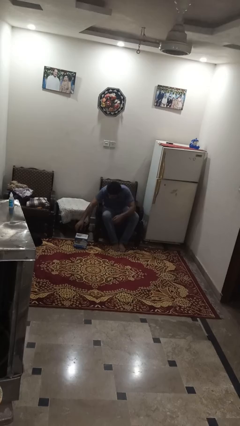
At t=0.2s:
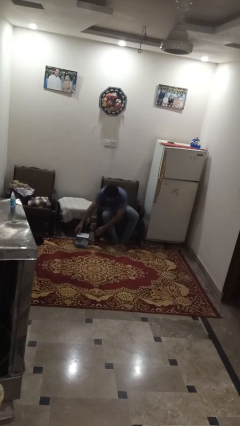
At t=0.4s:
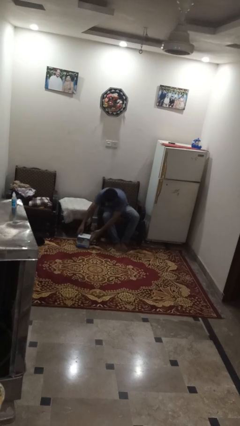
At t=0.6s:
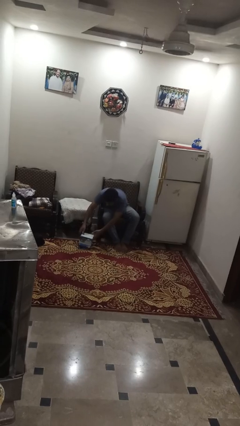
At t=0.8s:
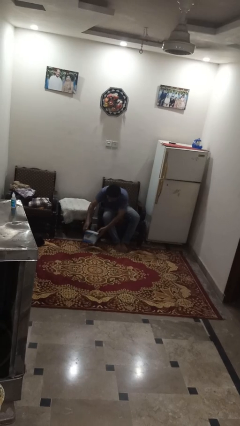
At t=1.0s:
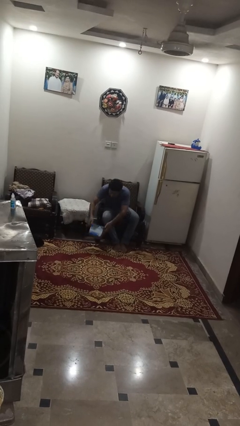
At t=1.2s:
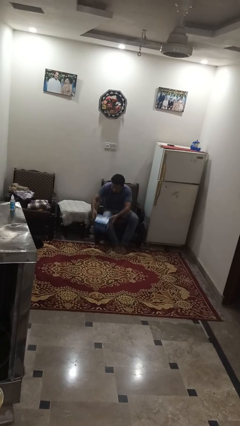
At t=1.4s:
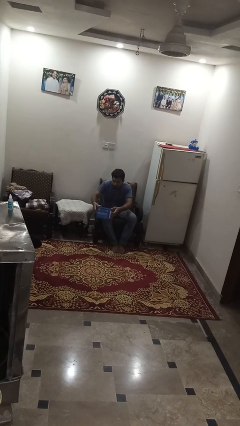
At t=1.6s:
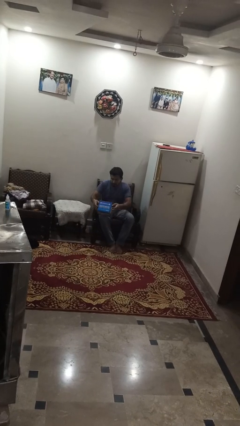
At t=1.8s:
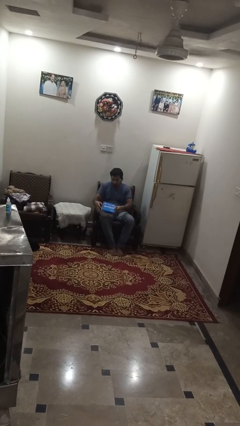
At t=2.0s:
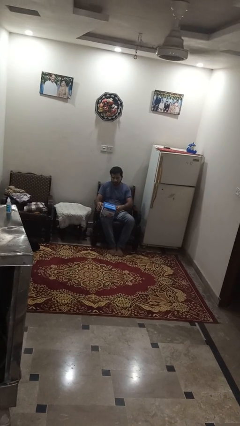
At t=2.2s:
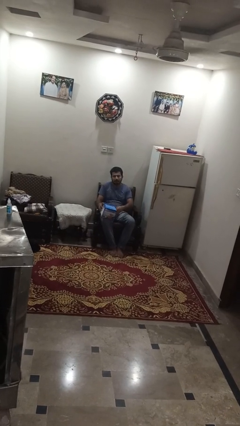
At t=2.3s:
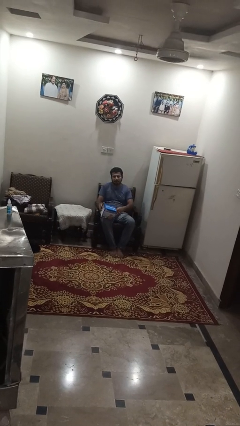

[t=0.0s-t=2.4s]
person picks up object from floor

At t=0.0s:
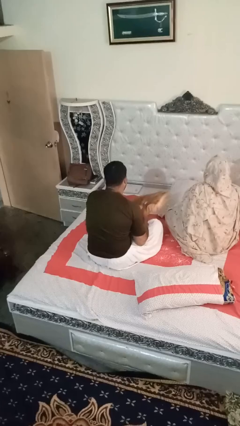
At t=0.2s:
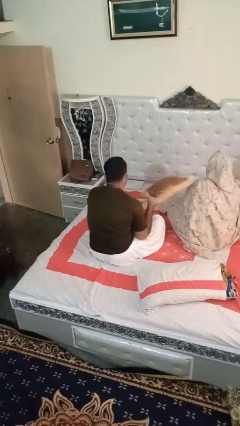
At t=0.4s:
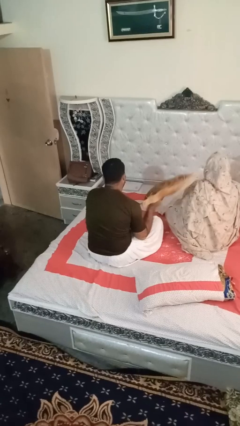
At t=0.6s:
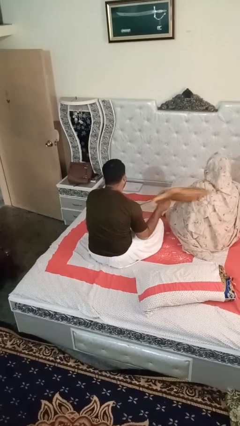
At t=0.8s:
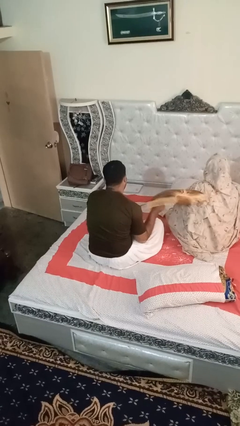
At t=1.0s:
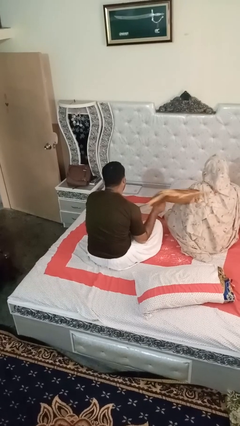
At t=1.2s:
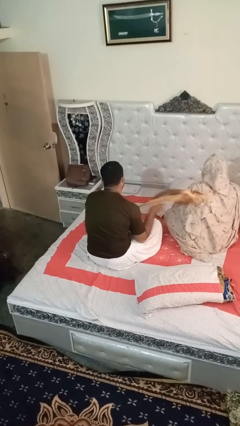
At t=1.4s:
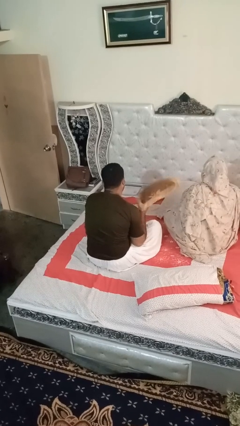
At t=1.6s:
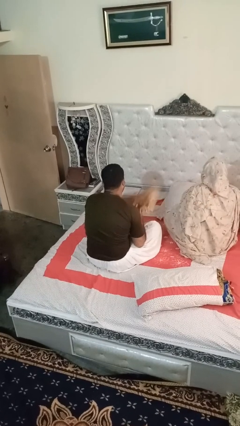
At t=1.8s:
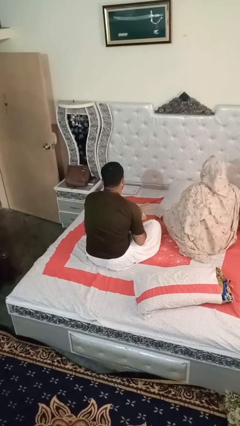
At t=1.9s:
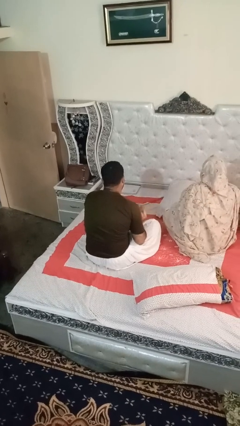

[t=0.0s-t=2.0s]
person hits person with pillow

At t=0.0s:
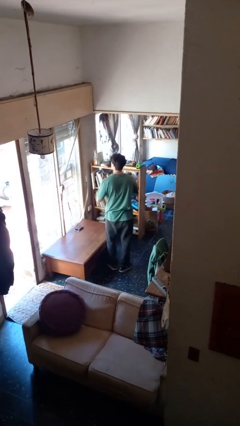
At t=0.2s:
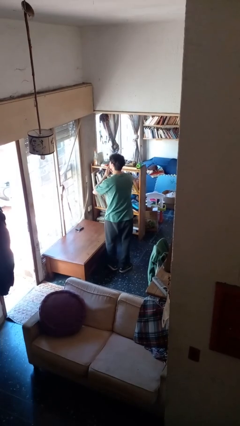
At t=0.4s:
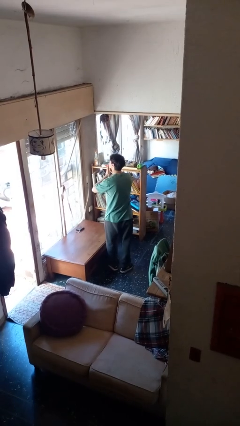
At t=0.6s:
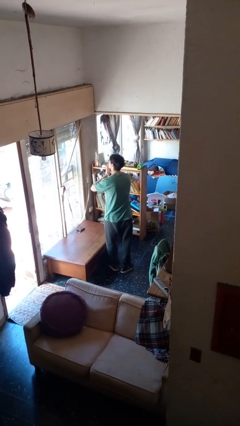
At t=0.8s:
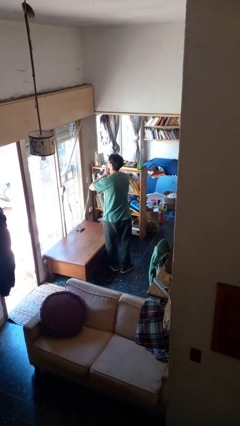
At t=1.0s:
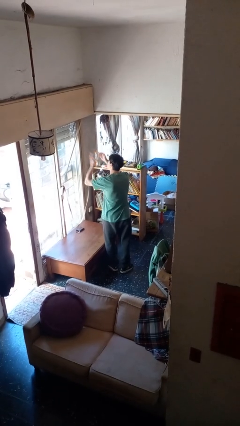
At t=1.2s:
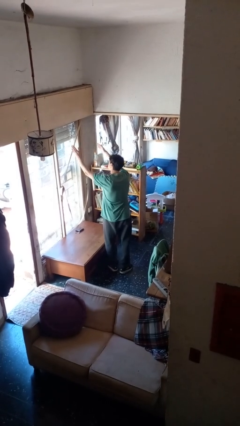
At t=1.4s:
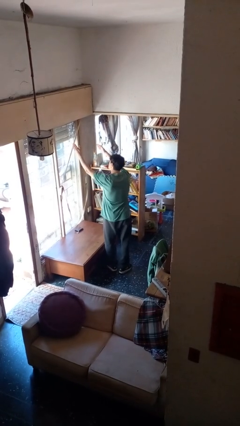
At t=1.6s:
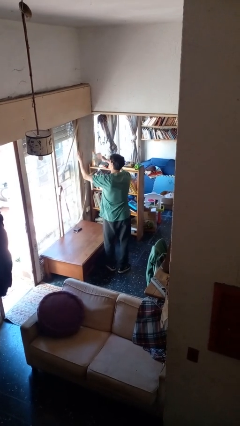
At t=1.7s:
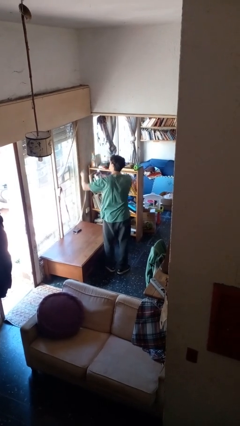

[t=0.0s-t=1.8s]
person gestures blow kiss

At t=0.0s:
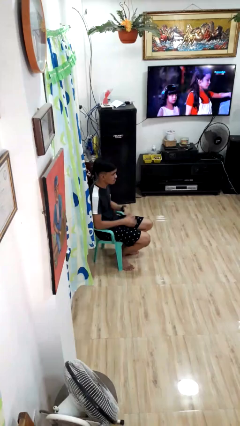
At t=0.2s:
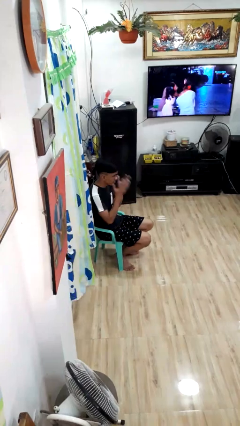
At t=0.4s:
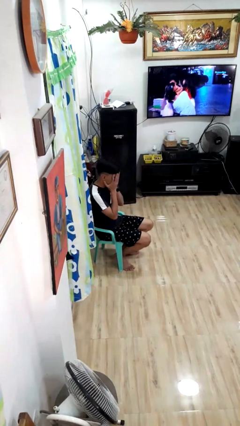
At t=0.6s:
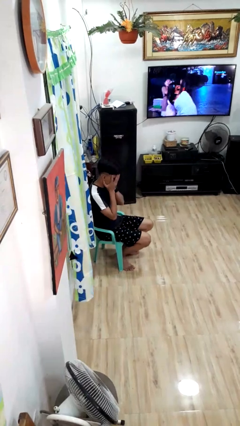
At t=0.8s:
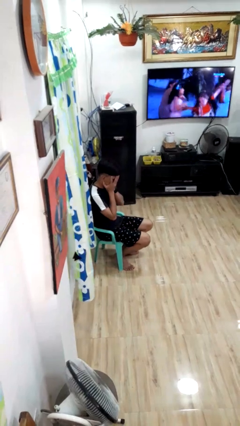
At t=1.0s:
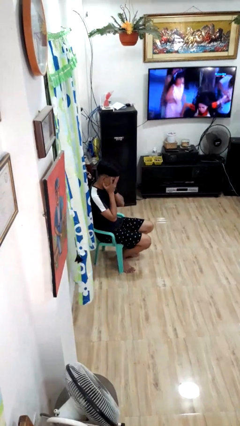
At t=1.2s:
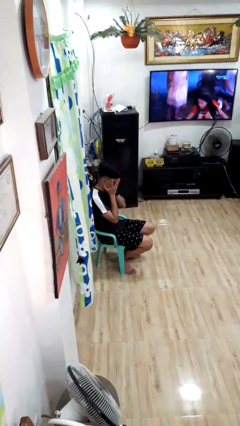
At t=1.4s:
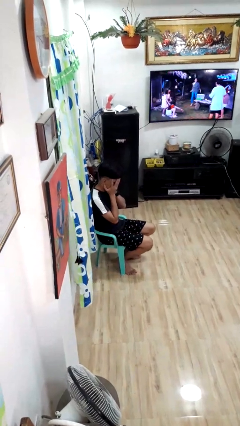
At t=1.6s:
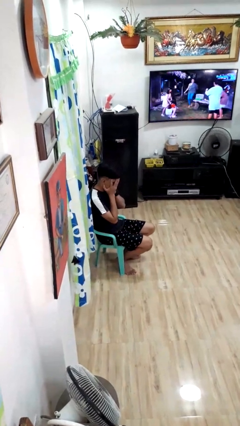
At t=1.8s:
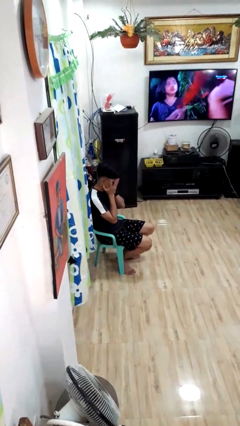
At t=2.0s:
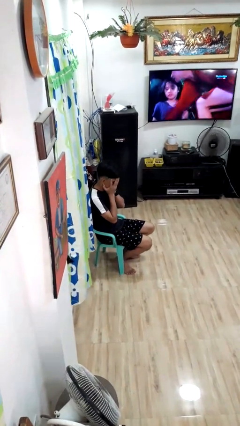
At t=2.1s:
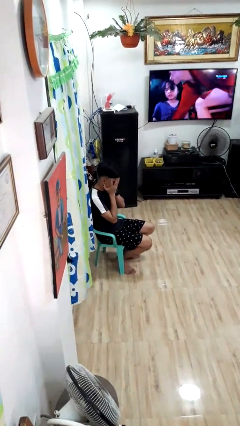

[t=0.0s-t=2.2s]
person covers face with hands

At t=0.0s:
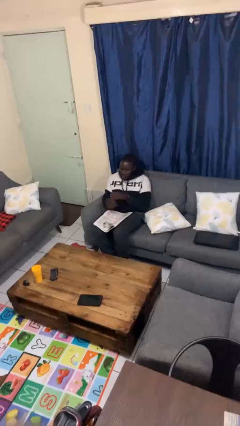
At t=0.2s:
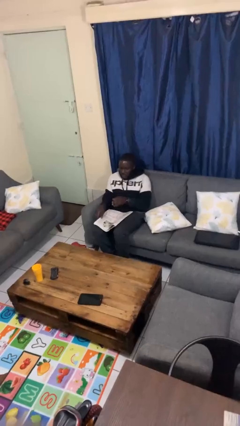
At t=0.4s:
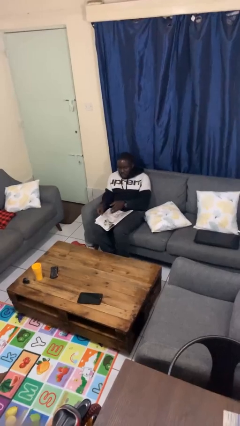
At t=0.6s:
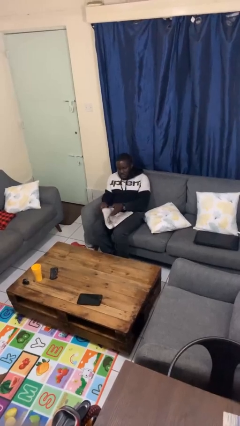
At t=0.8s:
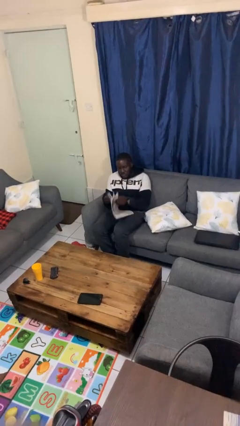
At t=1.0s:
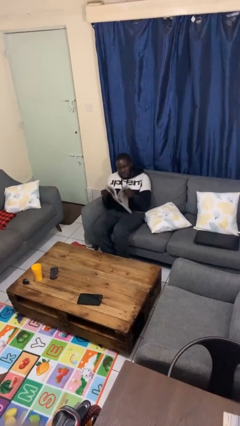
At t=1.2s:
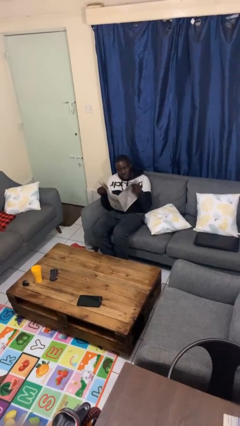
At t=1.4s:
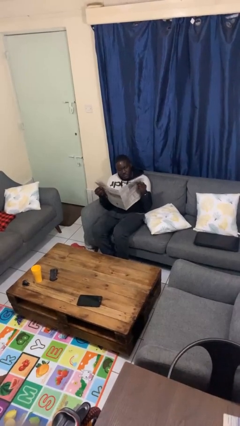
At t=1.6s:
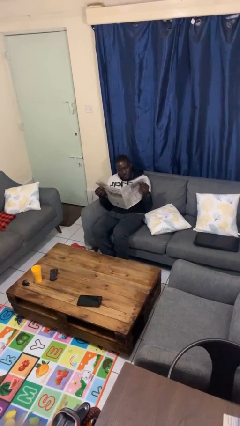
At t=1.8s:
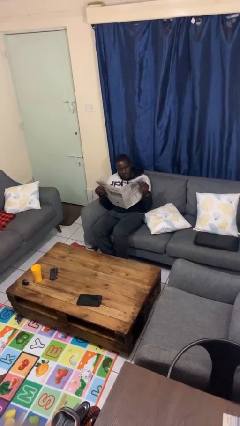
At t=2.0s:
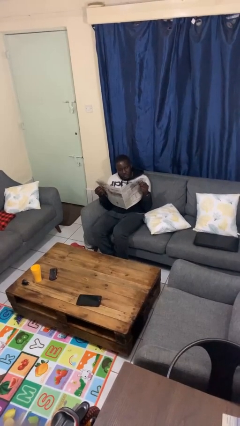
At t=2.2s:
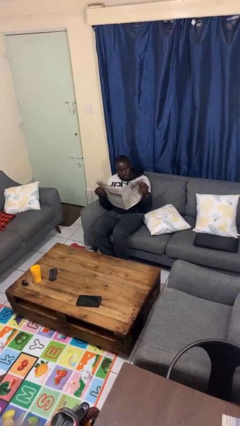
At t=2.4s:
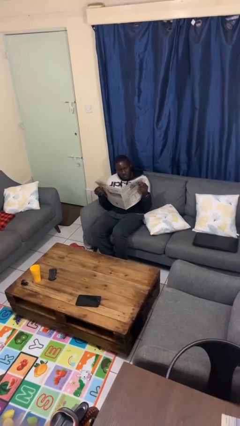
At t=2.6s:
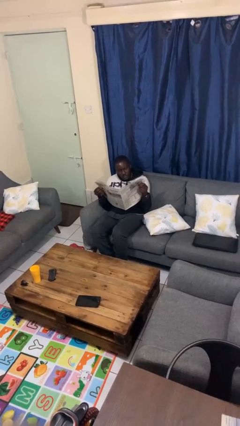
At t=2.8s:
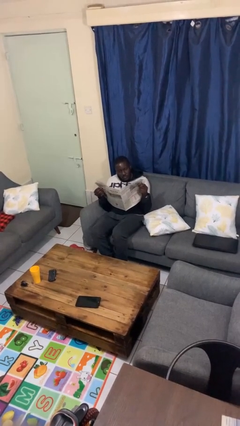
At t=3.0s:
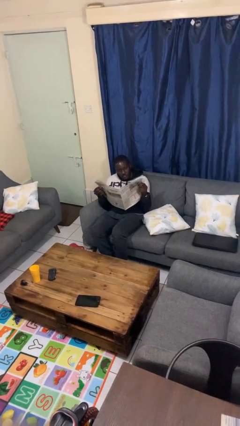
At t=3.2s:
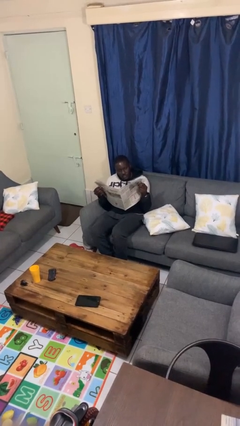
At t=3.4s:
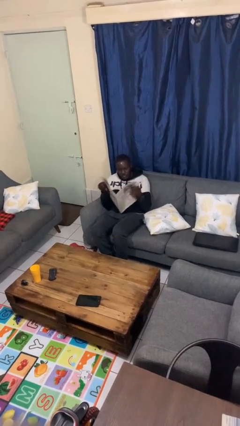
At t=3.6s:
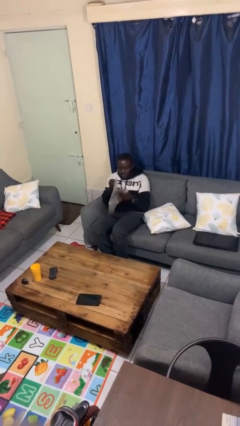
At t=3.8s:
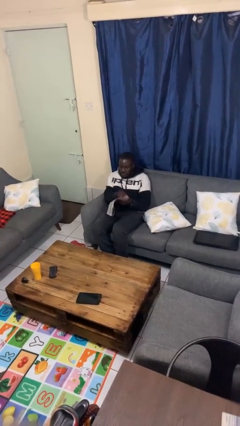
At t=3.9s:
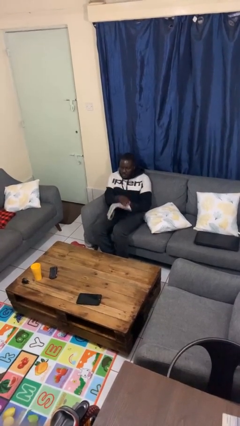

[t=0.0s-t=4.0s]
person reads newspaper

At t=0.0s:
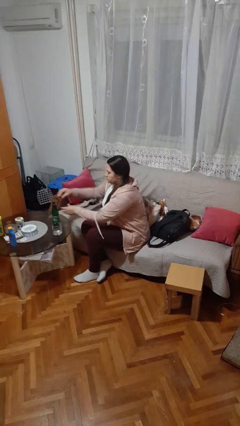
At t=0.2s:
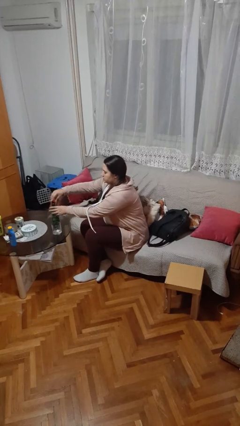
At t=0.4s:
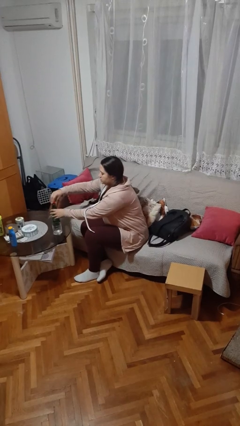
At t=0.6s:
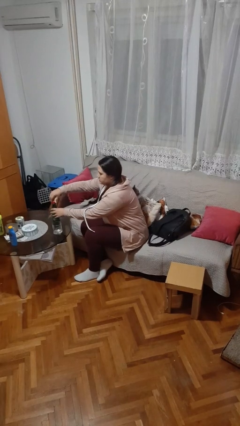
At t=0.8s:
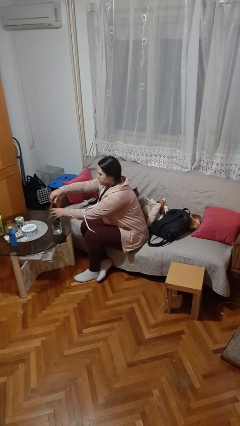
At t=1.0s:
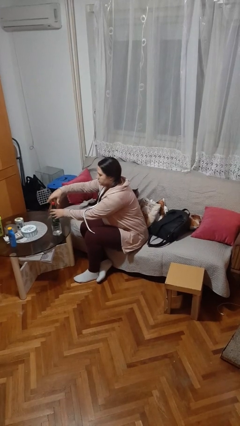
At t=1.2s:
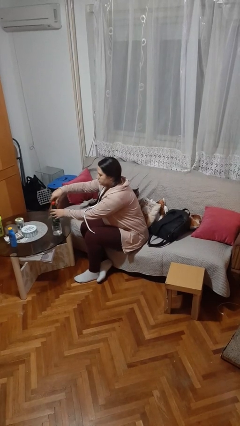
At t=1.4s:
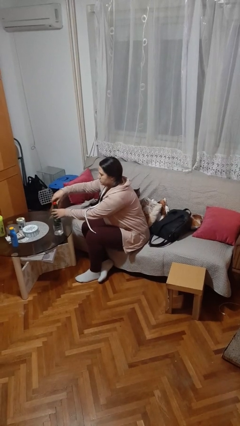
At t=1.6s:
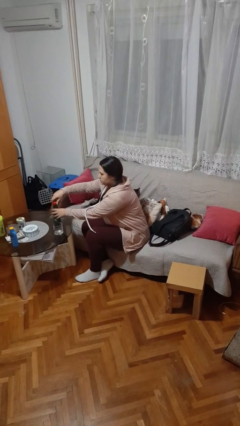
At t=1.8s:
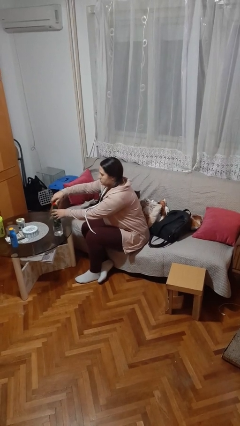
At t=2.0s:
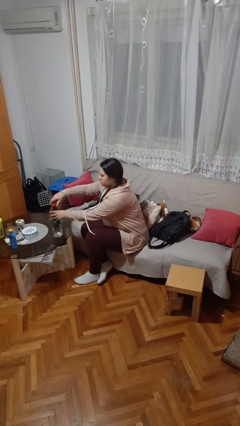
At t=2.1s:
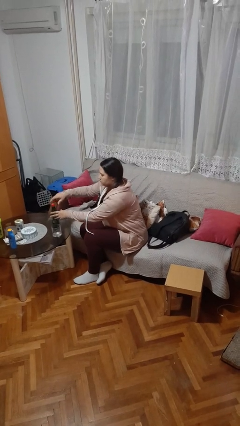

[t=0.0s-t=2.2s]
person screws lid to bottle

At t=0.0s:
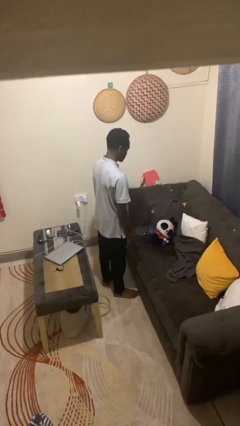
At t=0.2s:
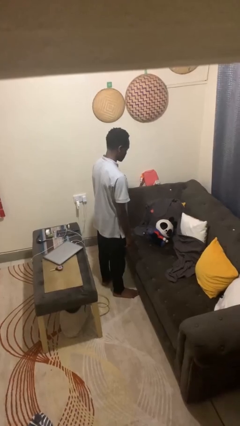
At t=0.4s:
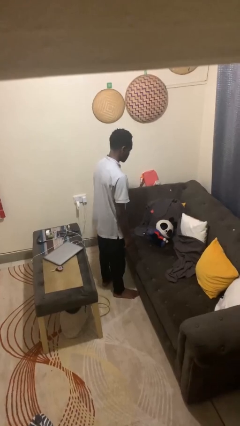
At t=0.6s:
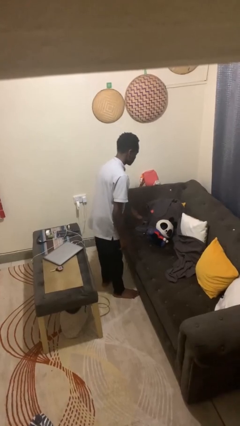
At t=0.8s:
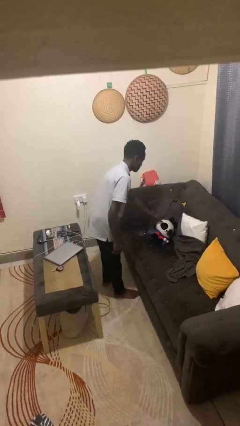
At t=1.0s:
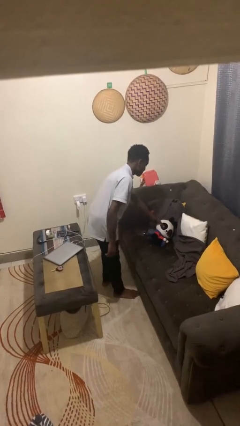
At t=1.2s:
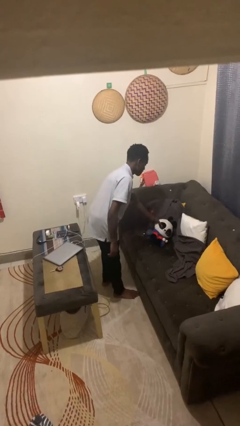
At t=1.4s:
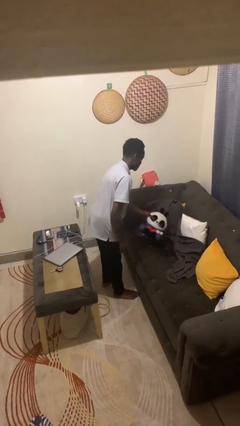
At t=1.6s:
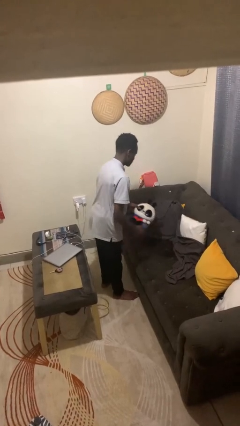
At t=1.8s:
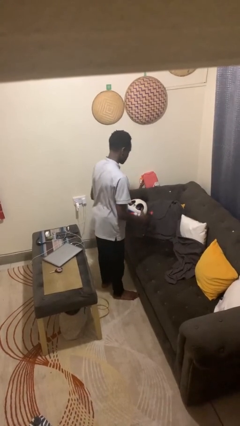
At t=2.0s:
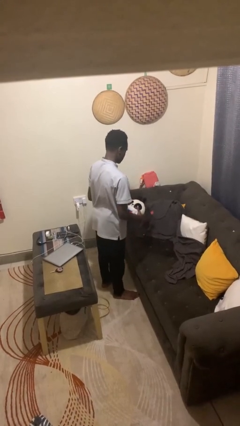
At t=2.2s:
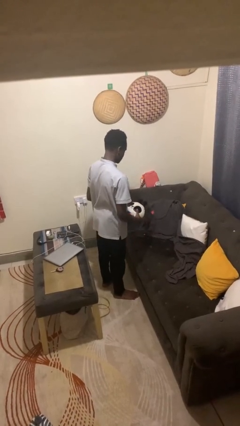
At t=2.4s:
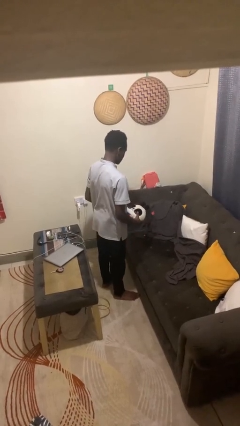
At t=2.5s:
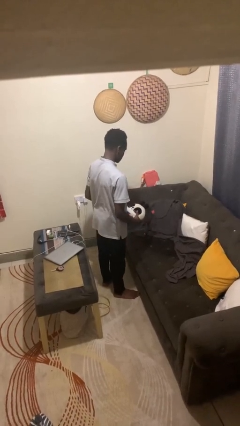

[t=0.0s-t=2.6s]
person picks up object from couch
